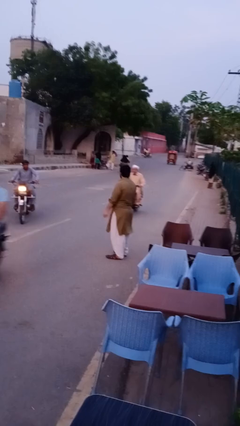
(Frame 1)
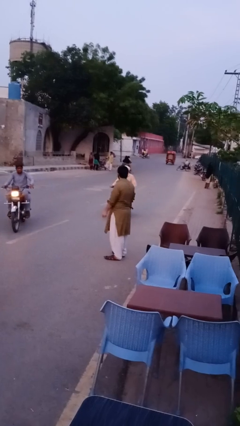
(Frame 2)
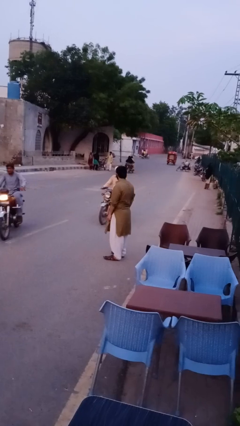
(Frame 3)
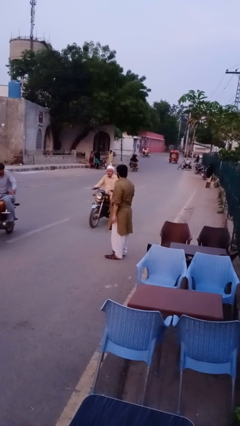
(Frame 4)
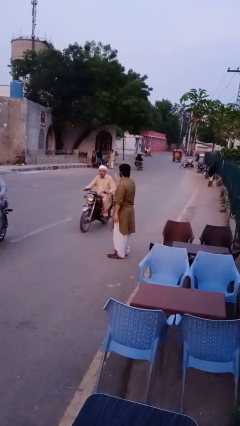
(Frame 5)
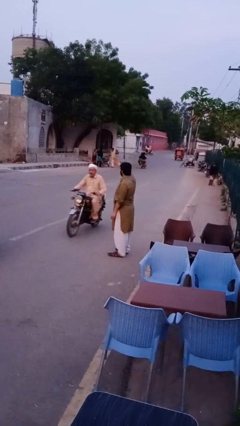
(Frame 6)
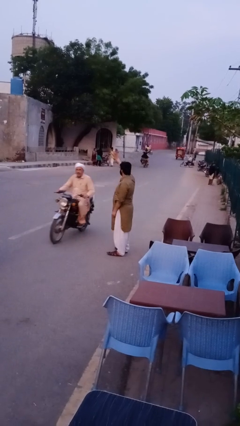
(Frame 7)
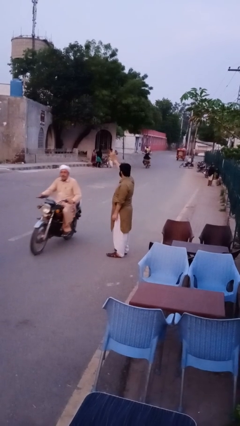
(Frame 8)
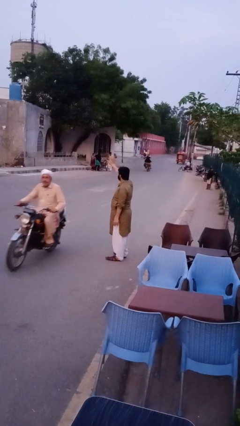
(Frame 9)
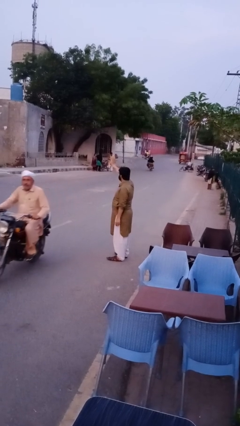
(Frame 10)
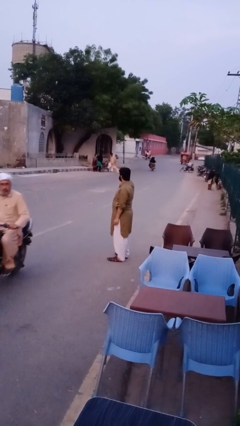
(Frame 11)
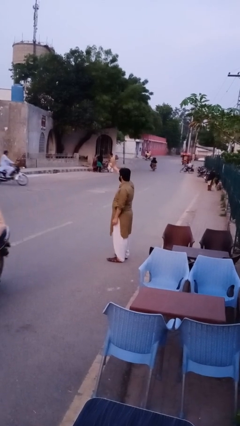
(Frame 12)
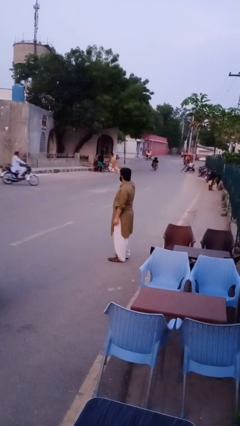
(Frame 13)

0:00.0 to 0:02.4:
person waves at person

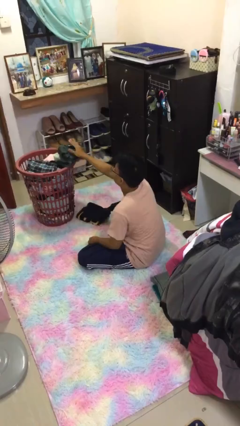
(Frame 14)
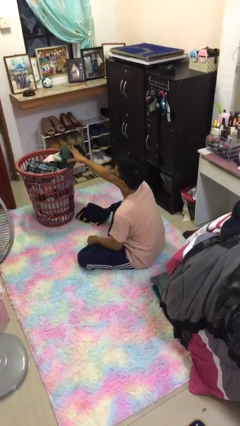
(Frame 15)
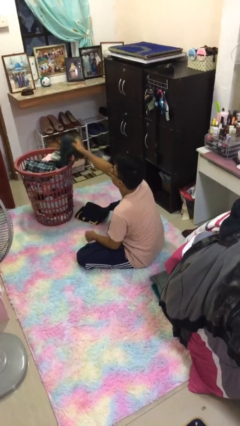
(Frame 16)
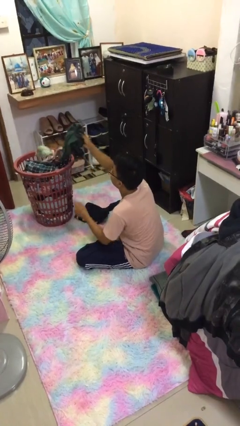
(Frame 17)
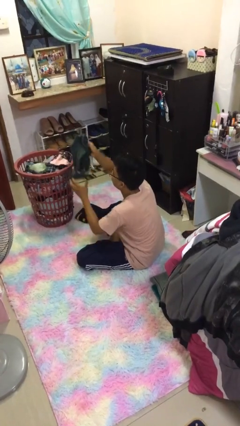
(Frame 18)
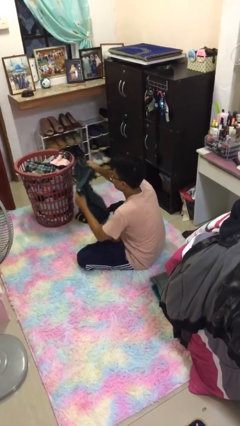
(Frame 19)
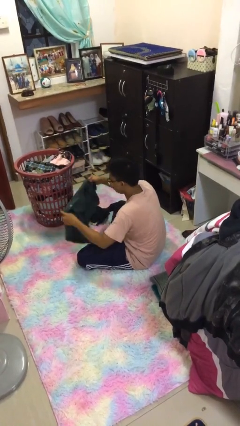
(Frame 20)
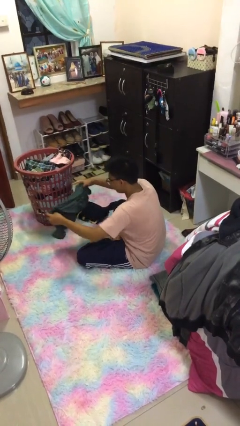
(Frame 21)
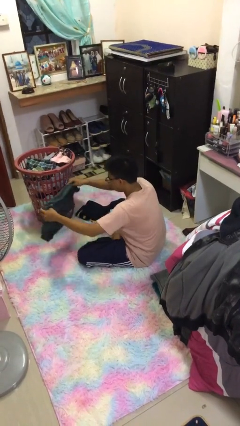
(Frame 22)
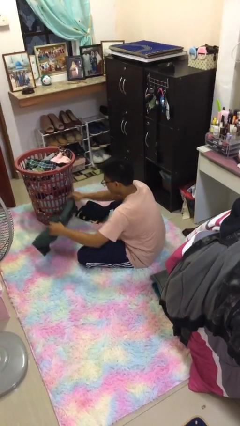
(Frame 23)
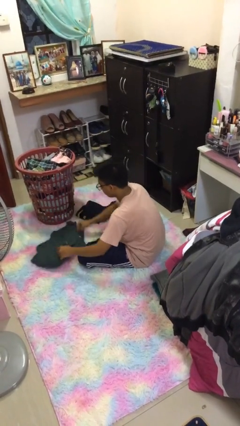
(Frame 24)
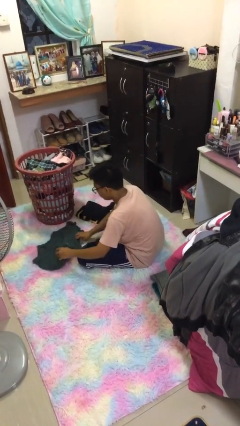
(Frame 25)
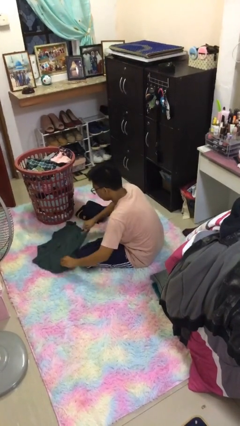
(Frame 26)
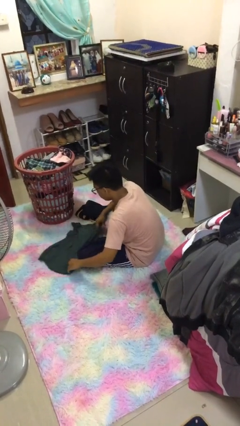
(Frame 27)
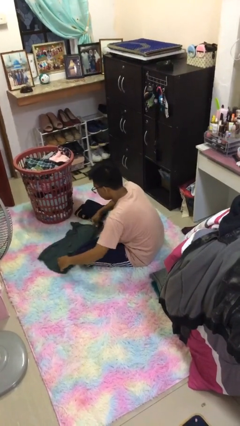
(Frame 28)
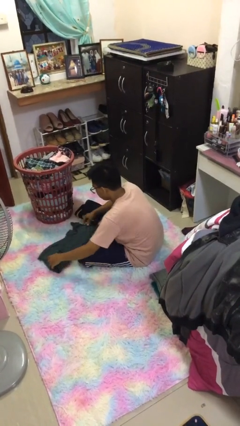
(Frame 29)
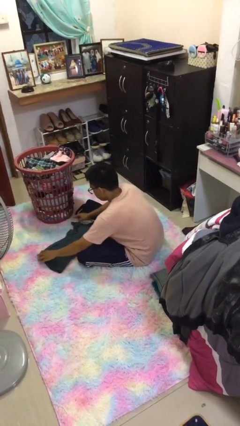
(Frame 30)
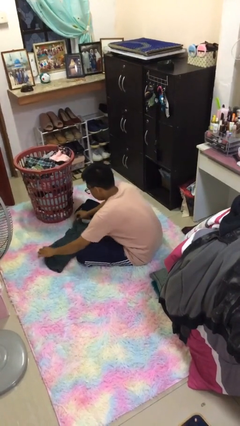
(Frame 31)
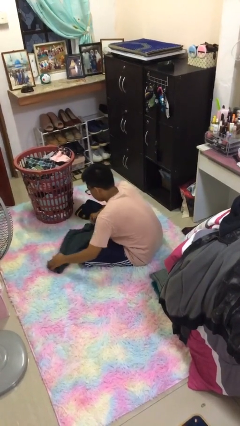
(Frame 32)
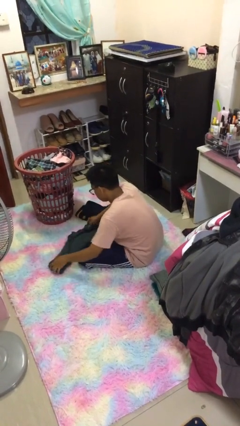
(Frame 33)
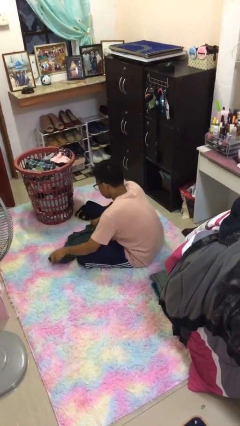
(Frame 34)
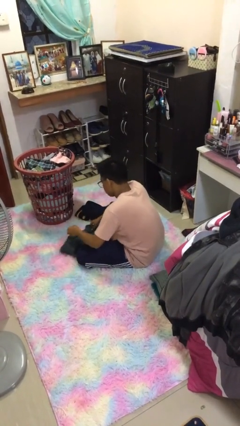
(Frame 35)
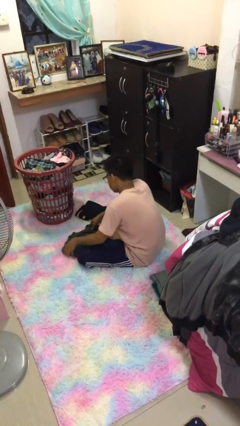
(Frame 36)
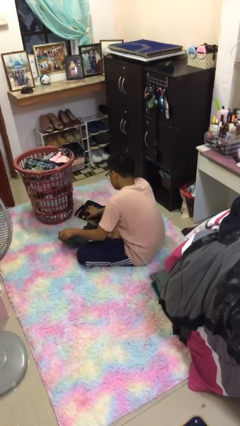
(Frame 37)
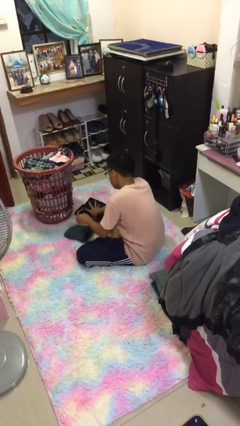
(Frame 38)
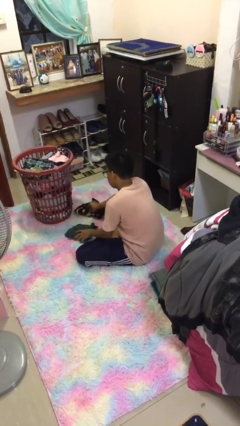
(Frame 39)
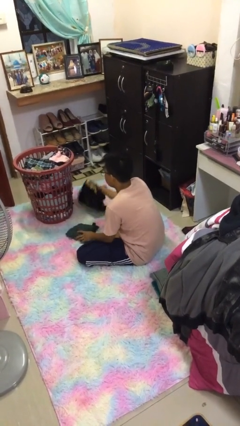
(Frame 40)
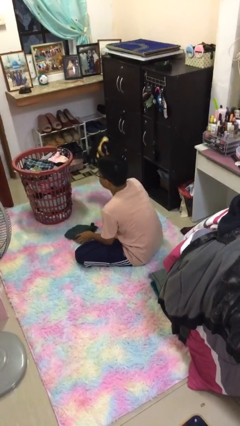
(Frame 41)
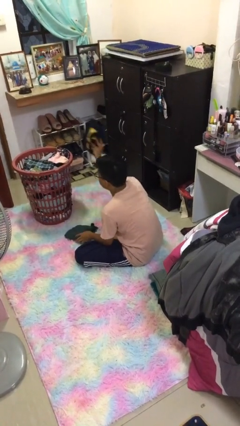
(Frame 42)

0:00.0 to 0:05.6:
person folds shirt

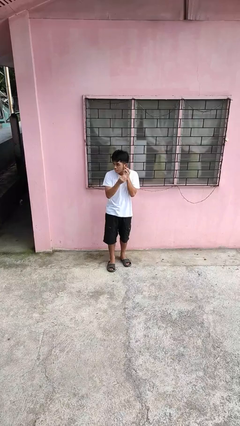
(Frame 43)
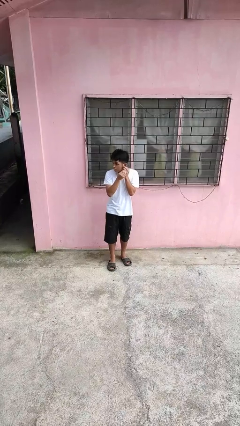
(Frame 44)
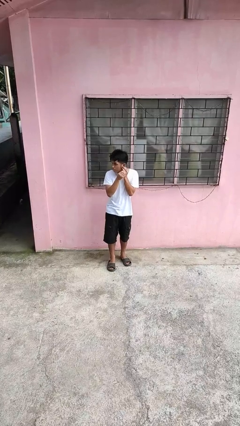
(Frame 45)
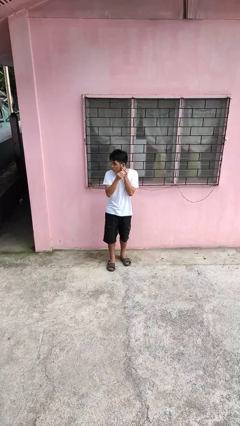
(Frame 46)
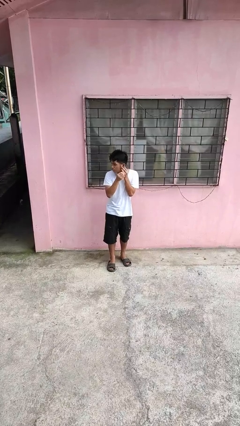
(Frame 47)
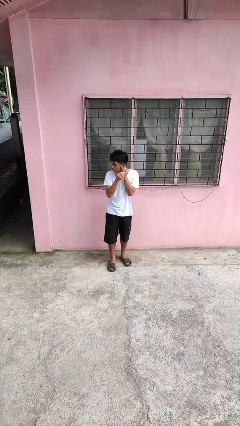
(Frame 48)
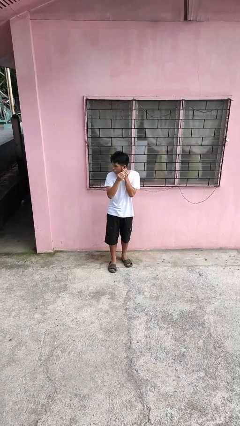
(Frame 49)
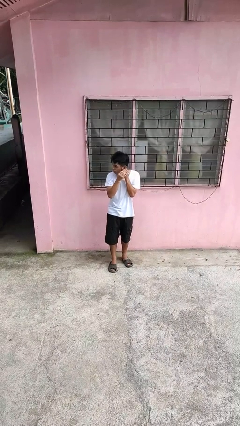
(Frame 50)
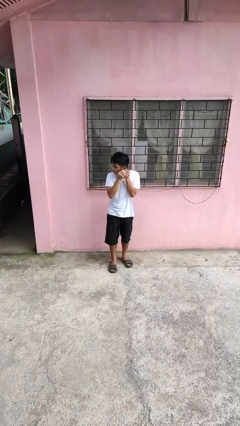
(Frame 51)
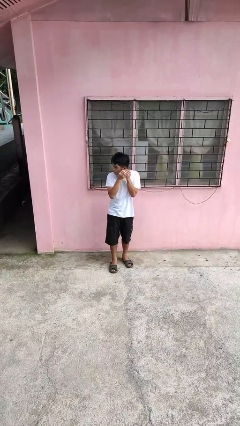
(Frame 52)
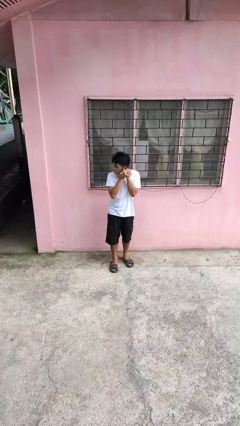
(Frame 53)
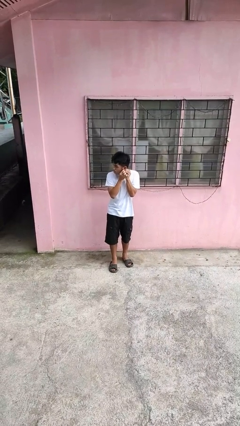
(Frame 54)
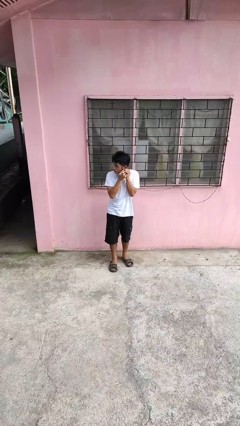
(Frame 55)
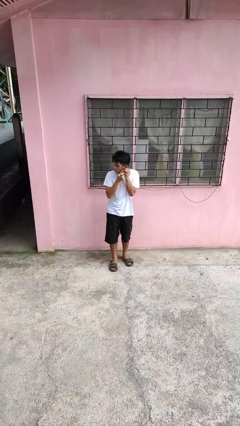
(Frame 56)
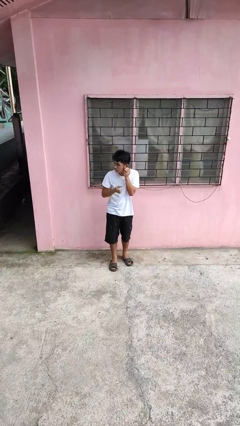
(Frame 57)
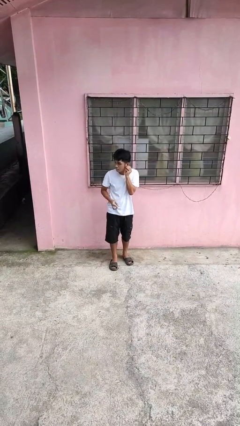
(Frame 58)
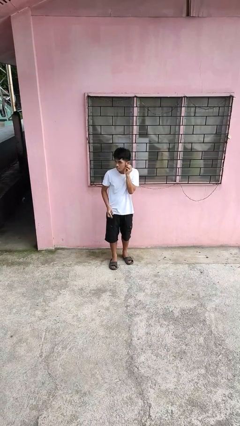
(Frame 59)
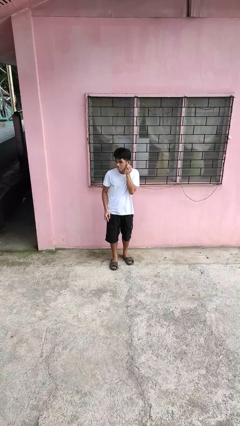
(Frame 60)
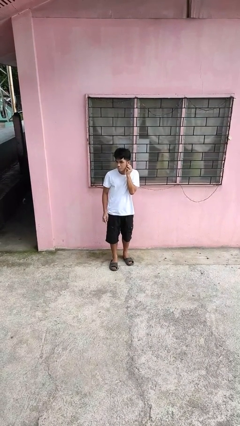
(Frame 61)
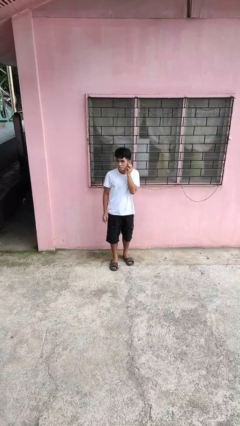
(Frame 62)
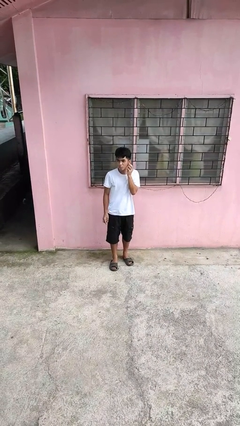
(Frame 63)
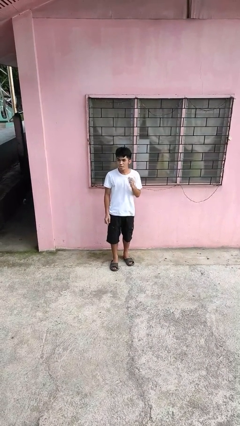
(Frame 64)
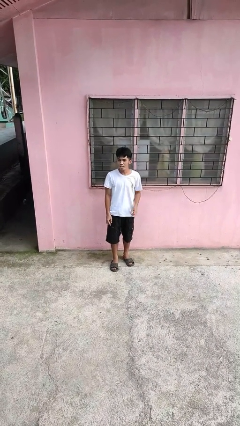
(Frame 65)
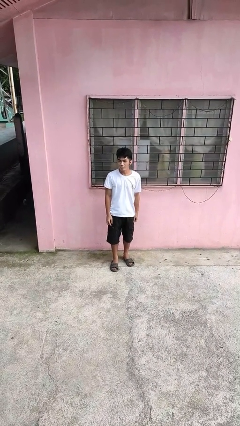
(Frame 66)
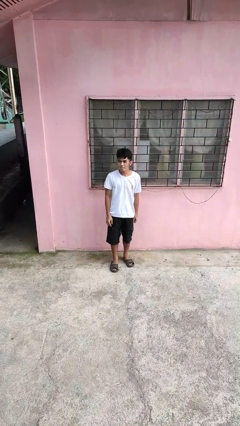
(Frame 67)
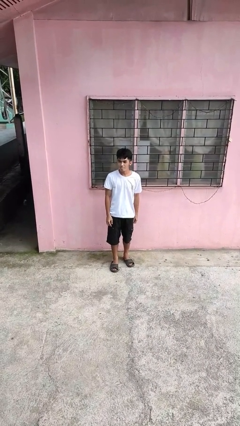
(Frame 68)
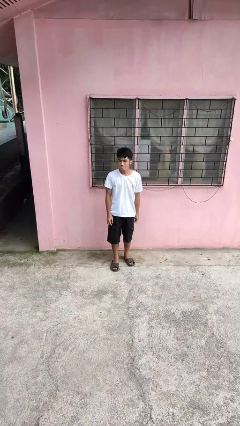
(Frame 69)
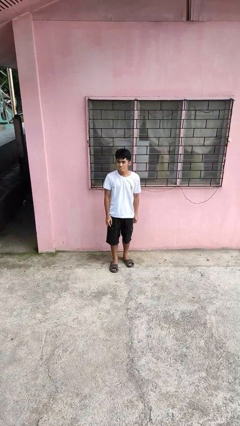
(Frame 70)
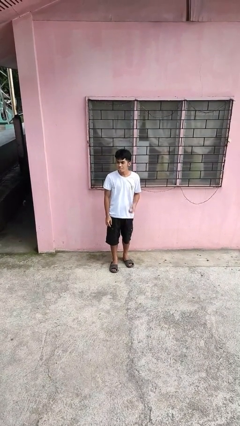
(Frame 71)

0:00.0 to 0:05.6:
person puts on earrings

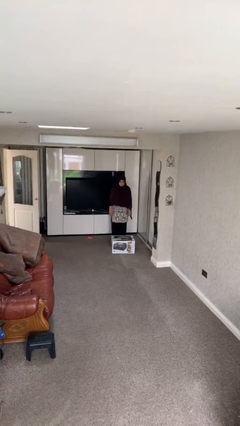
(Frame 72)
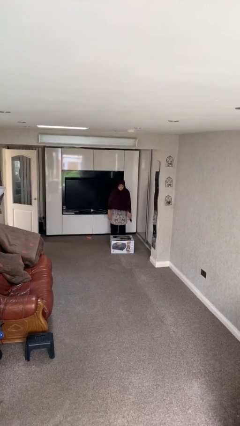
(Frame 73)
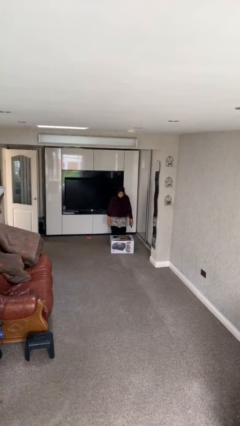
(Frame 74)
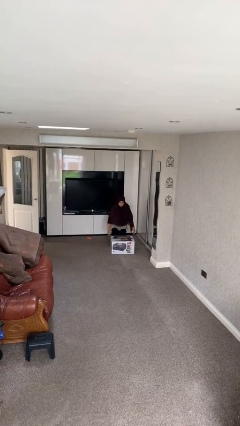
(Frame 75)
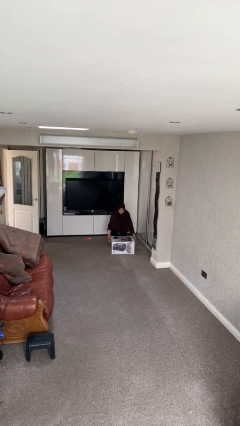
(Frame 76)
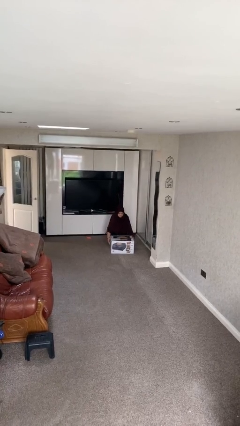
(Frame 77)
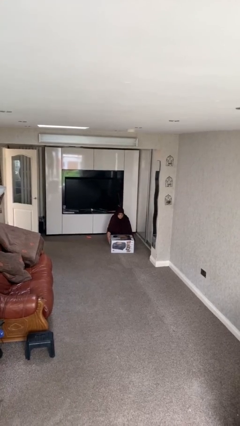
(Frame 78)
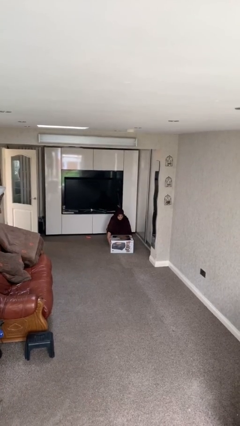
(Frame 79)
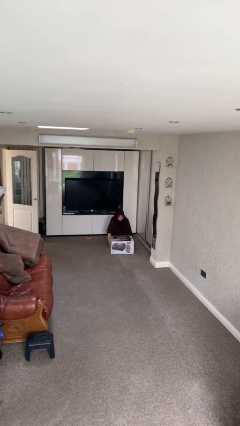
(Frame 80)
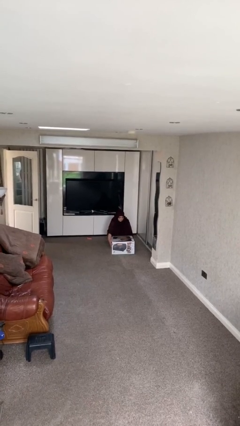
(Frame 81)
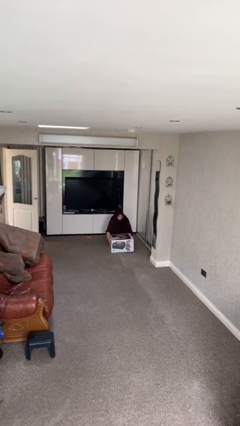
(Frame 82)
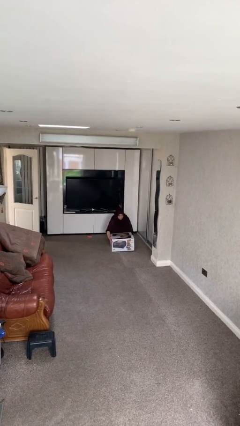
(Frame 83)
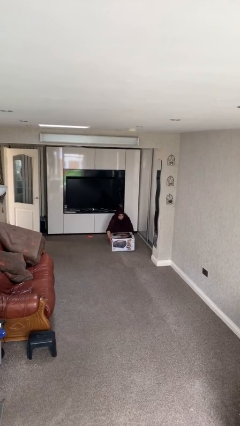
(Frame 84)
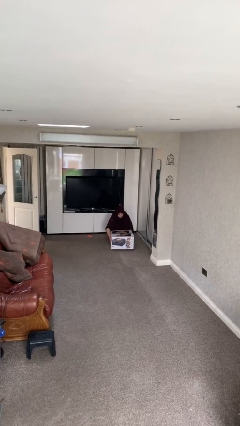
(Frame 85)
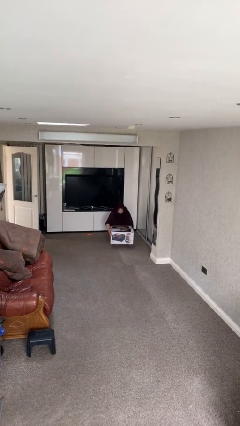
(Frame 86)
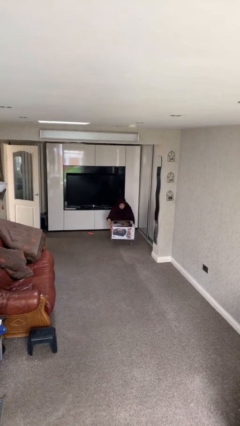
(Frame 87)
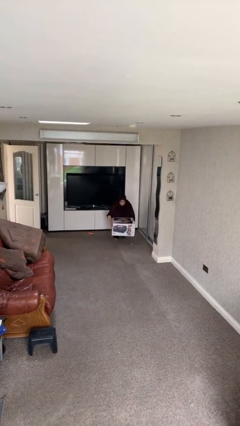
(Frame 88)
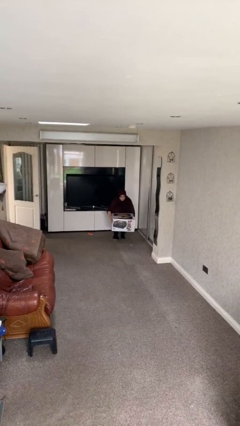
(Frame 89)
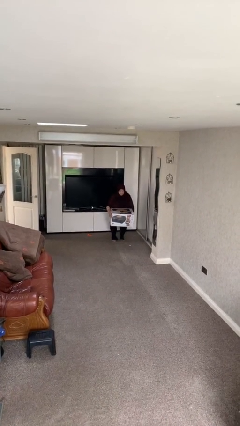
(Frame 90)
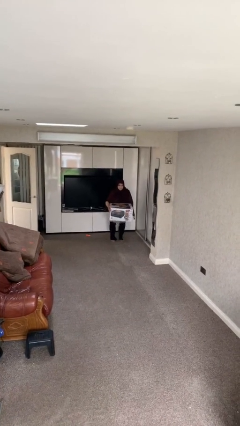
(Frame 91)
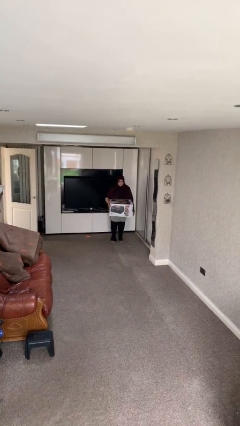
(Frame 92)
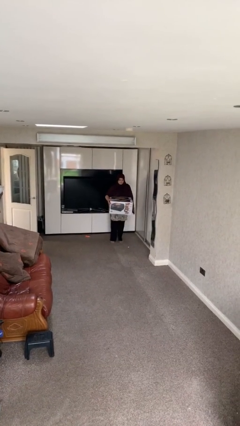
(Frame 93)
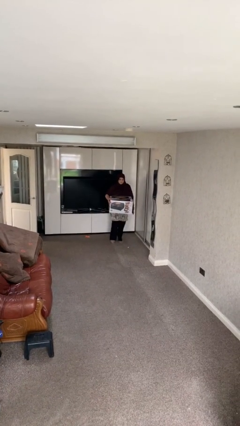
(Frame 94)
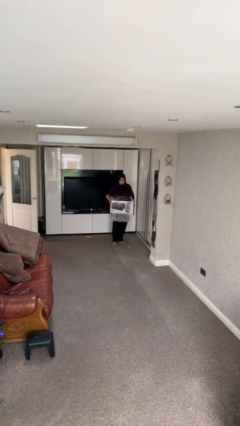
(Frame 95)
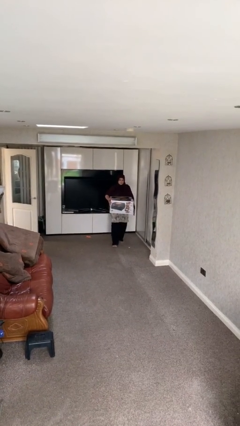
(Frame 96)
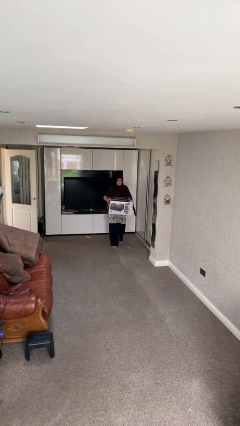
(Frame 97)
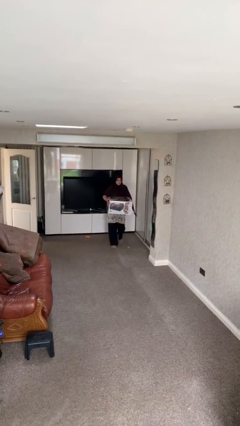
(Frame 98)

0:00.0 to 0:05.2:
person picks up object from floor
